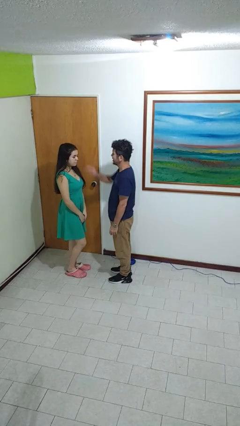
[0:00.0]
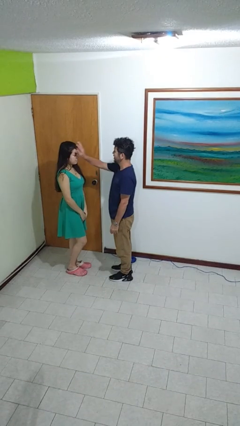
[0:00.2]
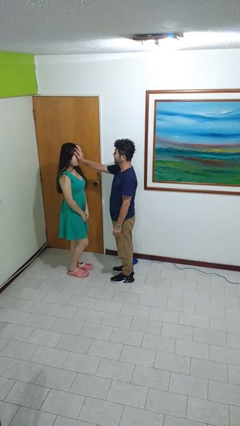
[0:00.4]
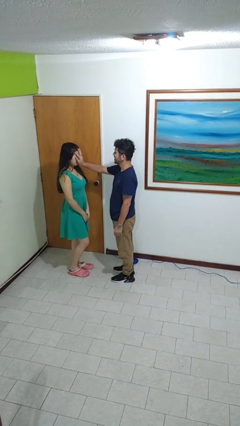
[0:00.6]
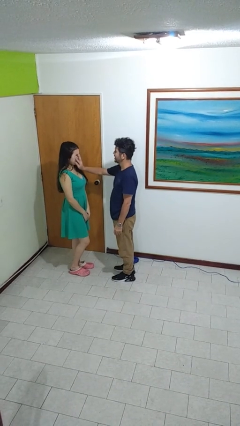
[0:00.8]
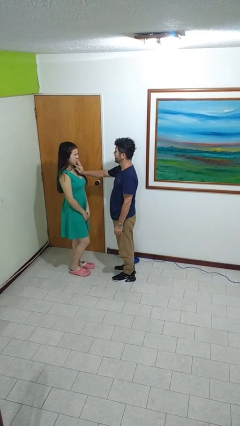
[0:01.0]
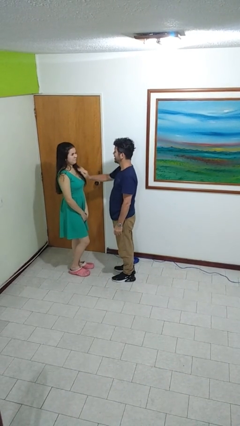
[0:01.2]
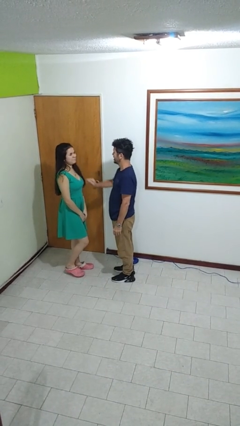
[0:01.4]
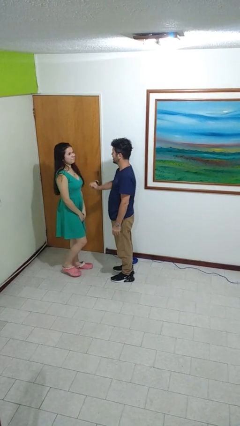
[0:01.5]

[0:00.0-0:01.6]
person touches face of person

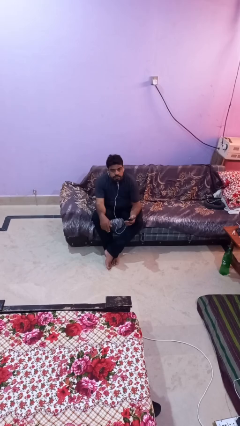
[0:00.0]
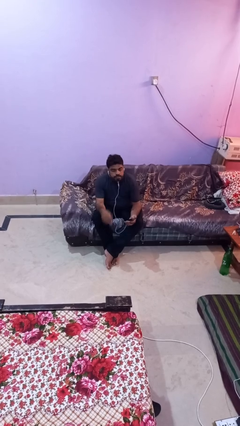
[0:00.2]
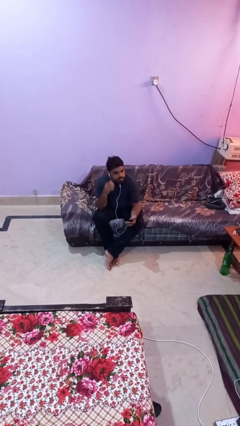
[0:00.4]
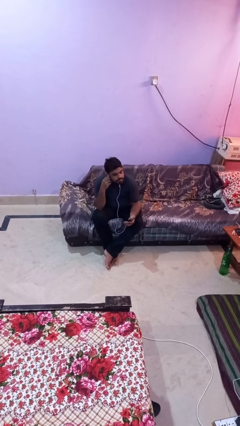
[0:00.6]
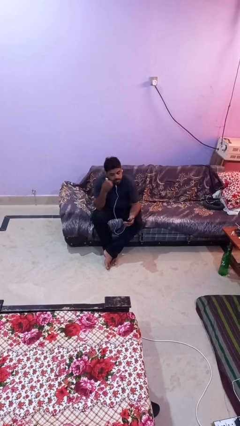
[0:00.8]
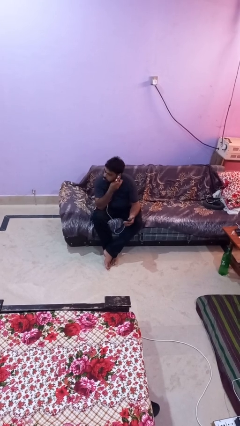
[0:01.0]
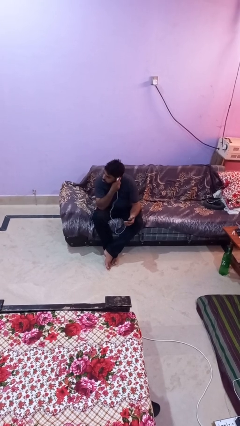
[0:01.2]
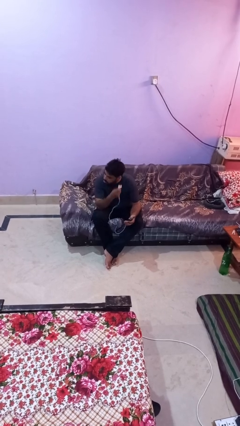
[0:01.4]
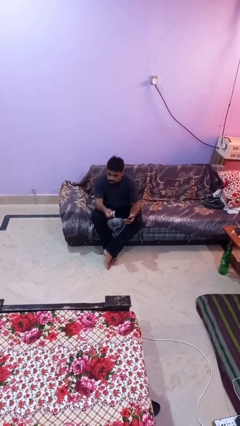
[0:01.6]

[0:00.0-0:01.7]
person takes off headphones

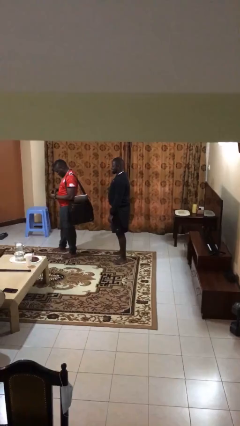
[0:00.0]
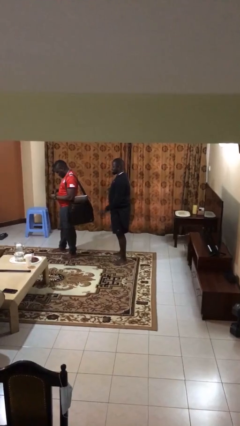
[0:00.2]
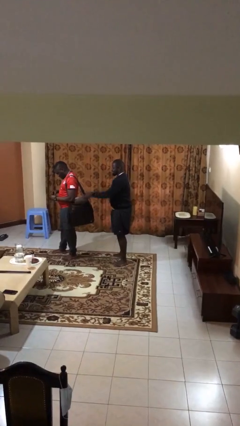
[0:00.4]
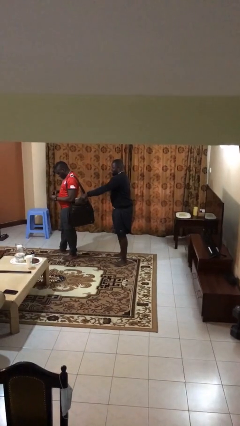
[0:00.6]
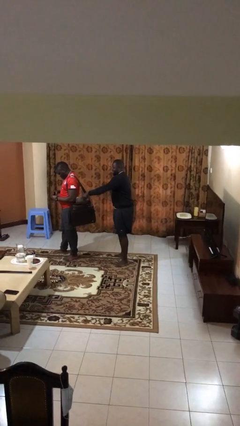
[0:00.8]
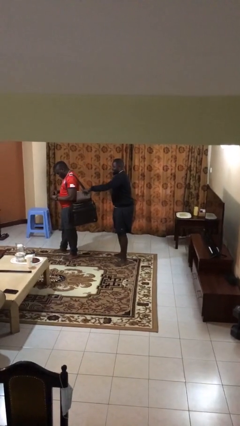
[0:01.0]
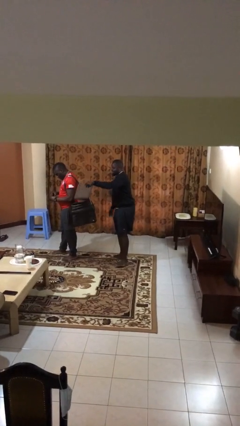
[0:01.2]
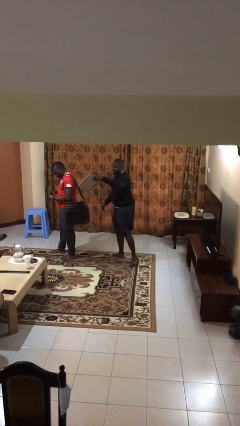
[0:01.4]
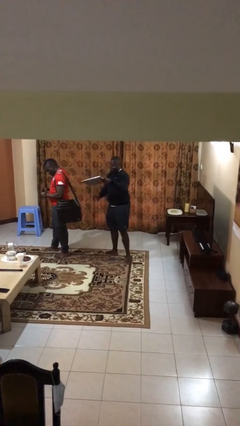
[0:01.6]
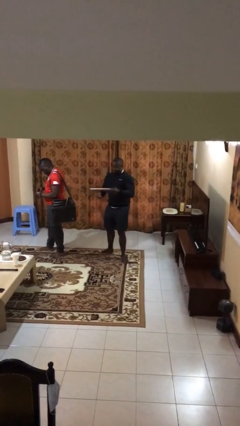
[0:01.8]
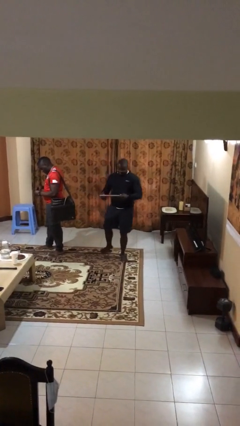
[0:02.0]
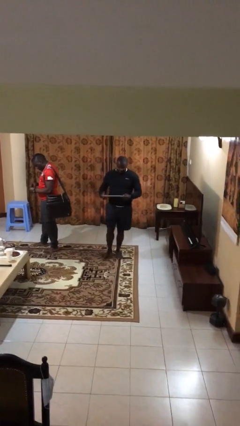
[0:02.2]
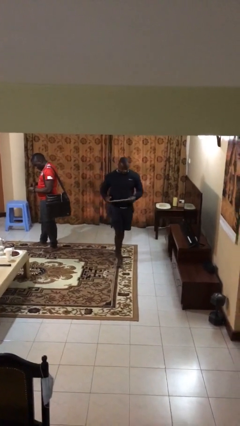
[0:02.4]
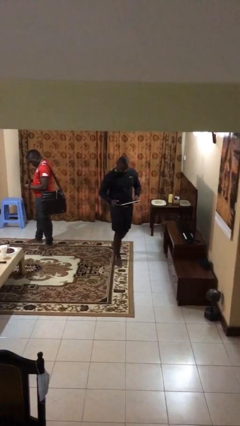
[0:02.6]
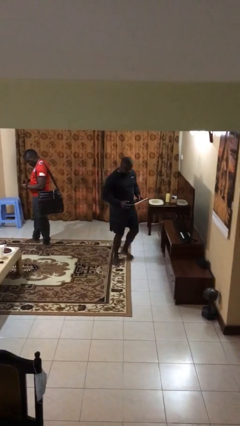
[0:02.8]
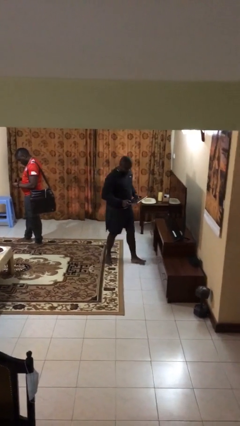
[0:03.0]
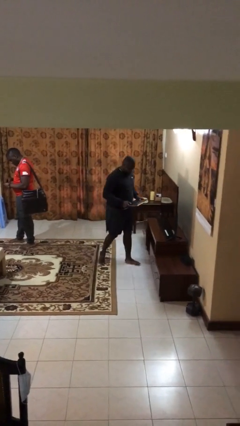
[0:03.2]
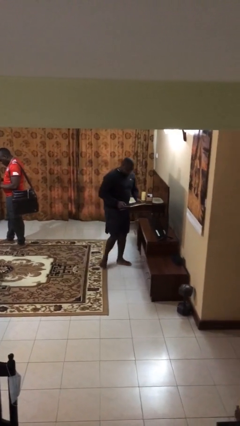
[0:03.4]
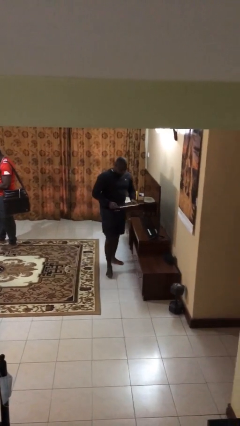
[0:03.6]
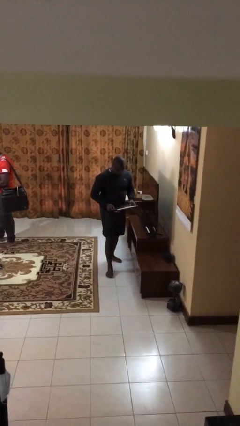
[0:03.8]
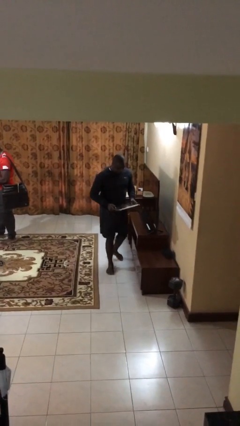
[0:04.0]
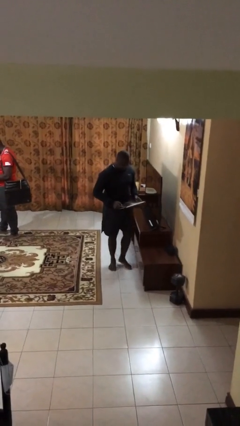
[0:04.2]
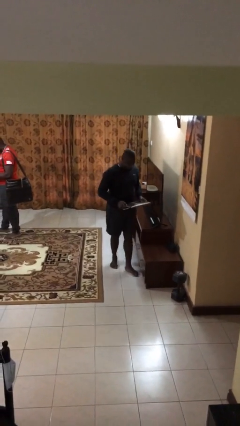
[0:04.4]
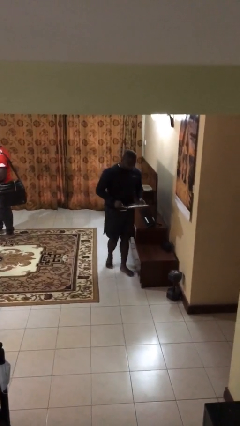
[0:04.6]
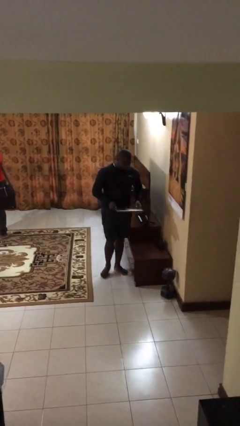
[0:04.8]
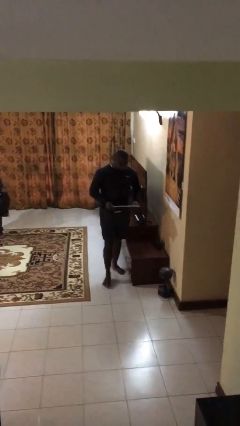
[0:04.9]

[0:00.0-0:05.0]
person steals object from person

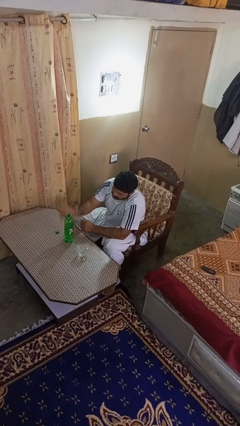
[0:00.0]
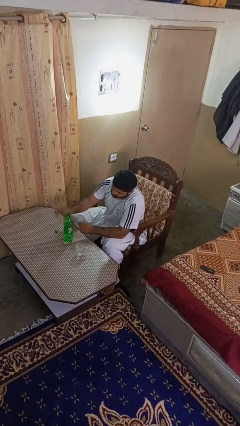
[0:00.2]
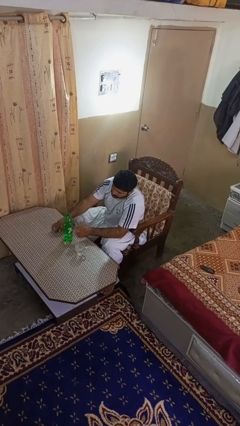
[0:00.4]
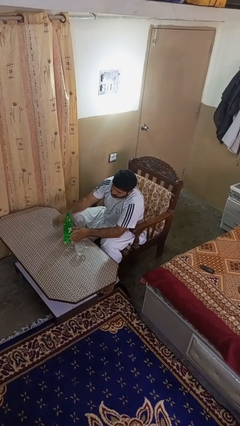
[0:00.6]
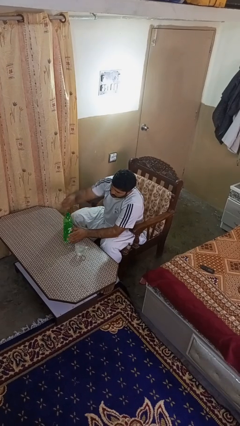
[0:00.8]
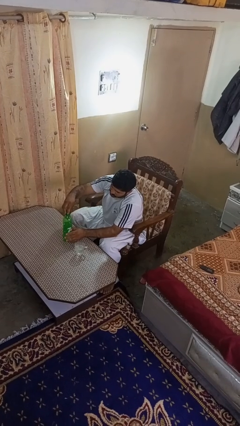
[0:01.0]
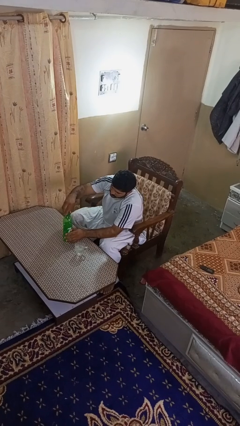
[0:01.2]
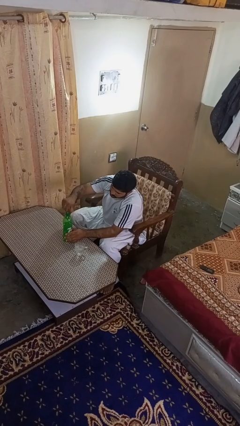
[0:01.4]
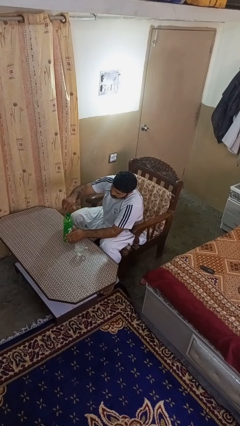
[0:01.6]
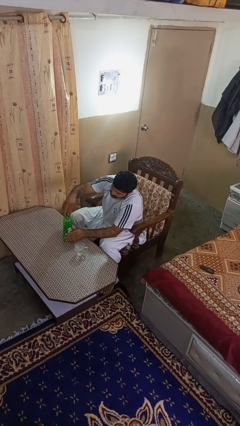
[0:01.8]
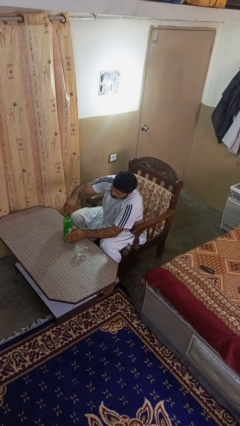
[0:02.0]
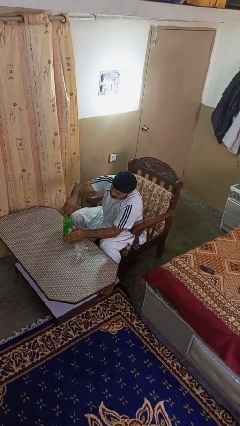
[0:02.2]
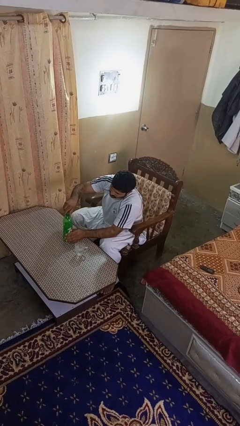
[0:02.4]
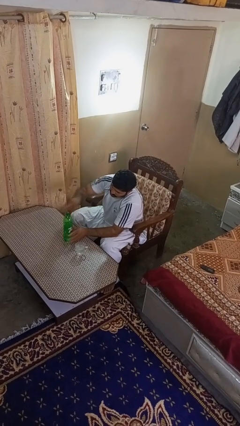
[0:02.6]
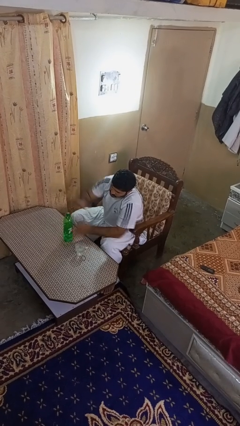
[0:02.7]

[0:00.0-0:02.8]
person screws lid to bottle

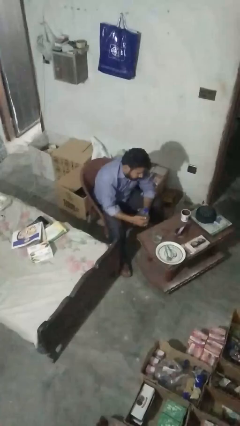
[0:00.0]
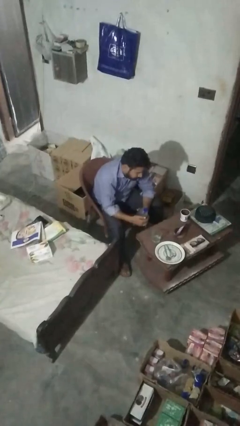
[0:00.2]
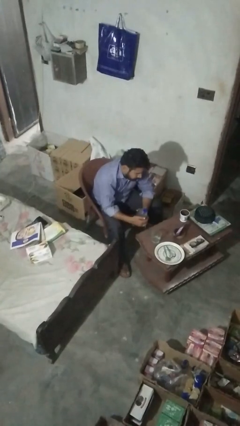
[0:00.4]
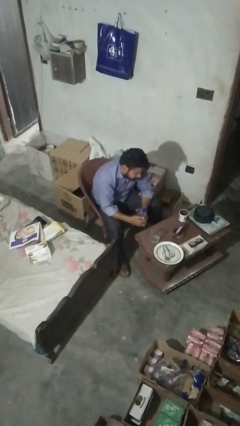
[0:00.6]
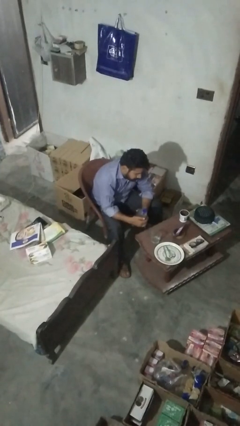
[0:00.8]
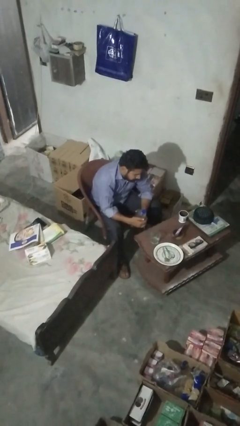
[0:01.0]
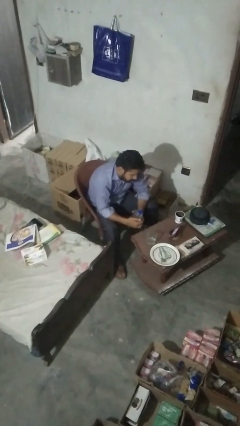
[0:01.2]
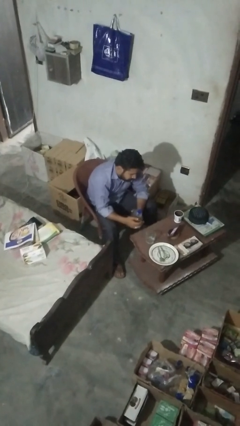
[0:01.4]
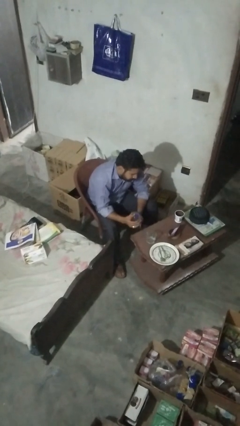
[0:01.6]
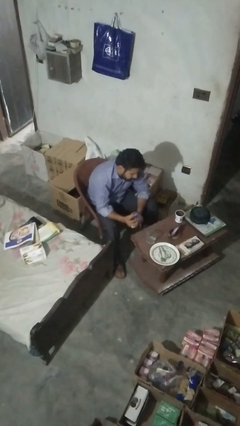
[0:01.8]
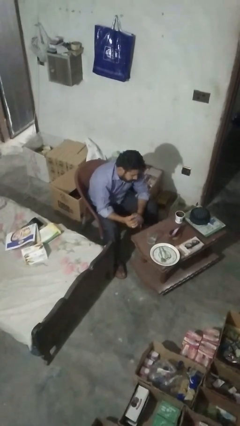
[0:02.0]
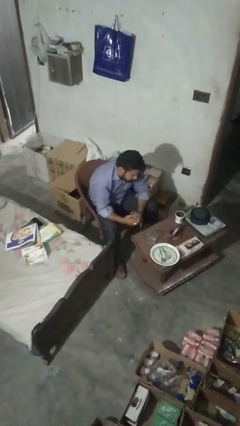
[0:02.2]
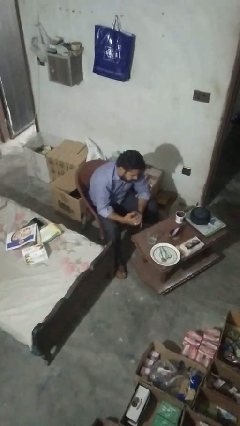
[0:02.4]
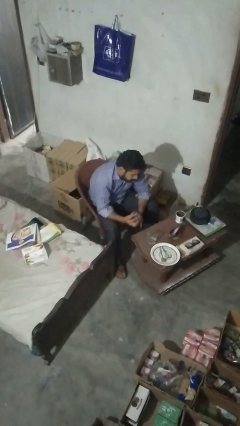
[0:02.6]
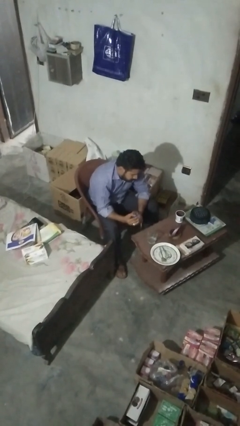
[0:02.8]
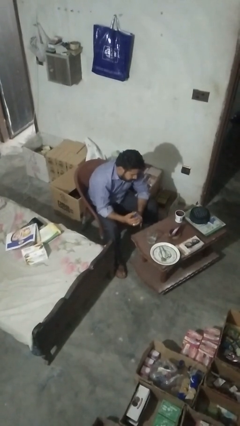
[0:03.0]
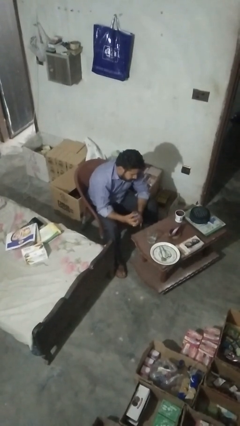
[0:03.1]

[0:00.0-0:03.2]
person unscrews lid from bottle

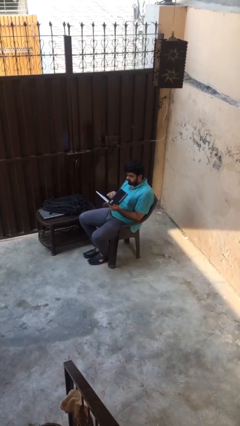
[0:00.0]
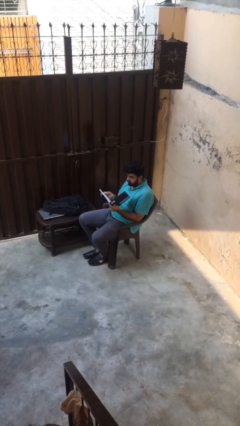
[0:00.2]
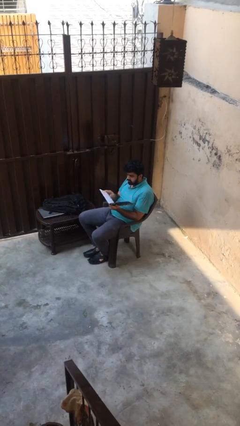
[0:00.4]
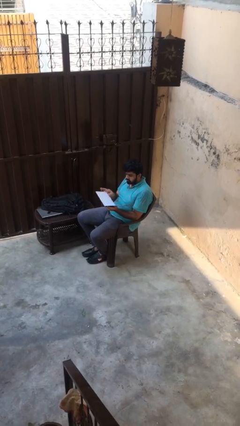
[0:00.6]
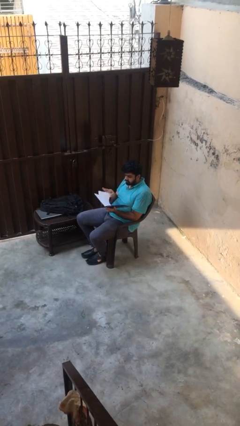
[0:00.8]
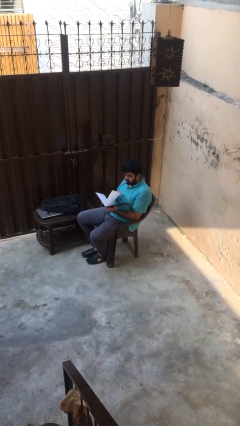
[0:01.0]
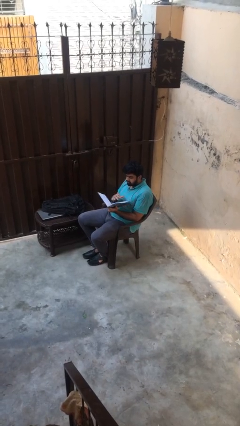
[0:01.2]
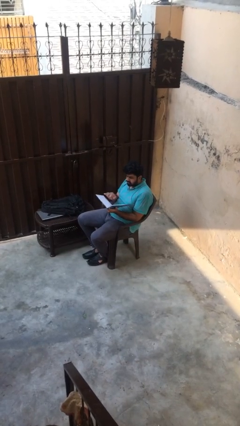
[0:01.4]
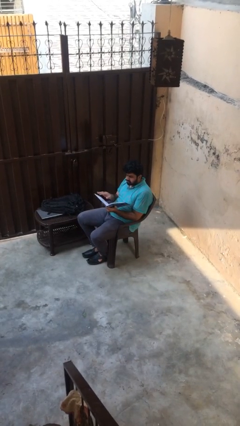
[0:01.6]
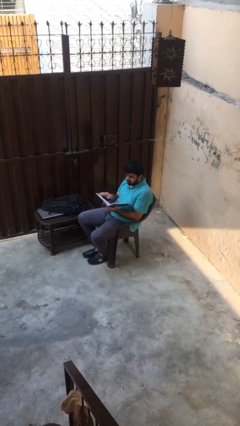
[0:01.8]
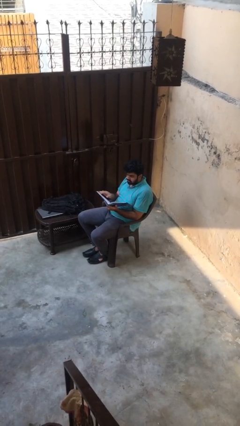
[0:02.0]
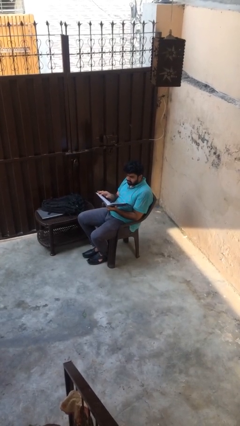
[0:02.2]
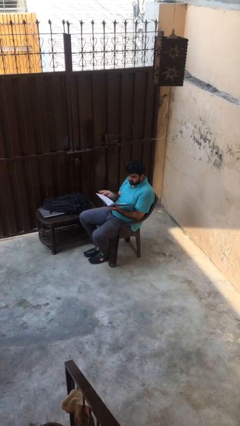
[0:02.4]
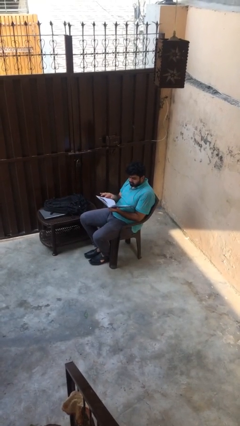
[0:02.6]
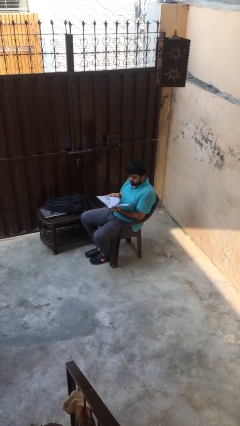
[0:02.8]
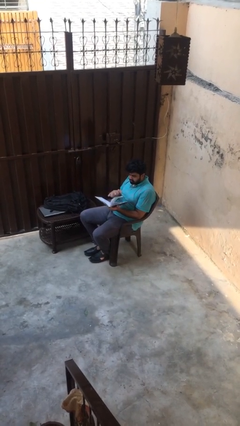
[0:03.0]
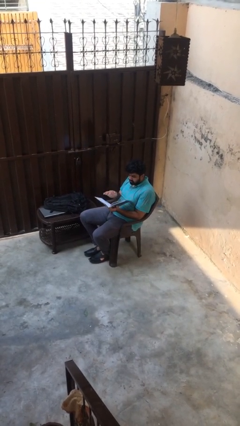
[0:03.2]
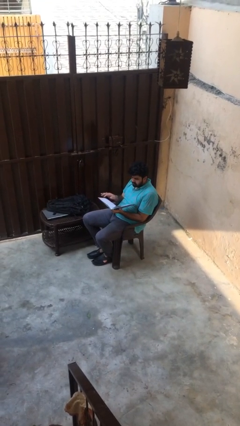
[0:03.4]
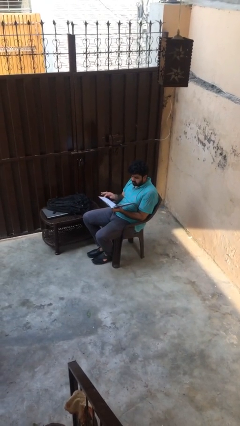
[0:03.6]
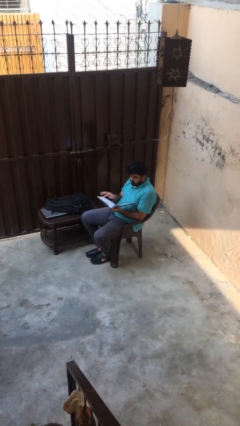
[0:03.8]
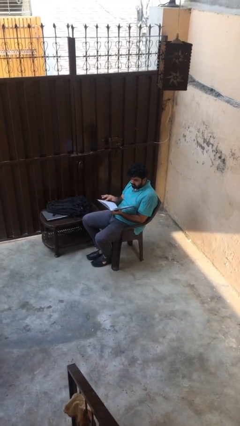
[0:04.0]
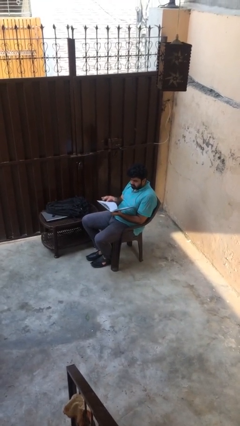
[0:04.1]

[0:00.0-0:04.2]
person reads document
